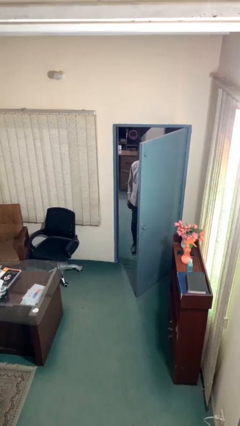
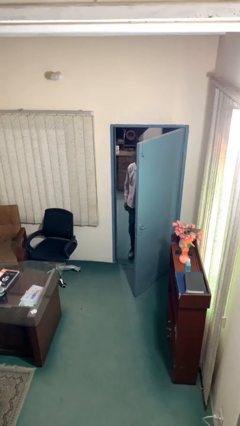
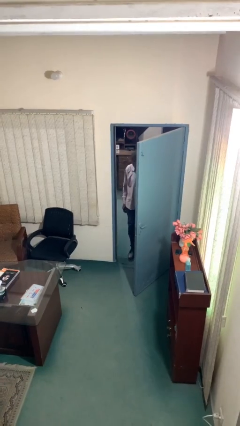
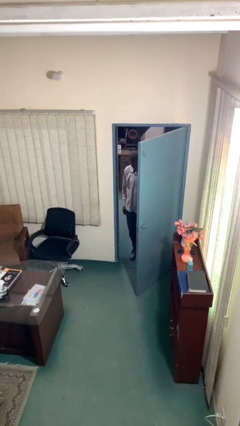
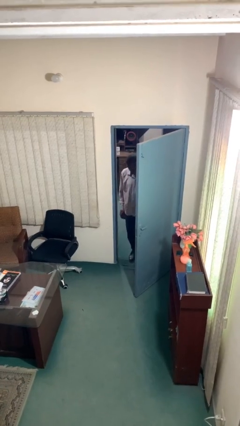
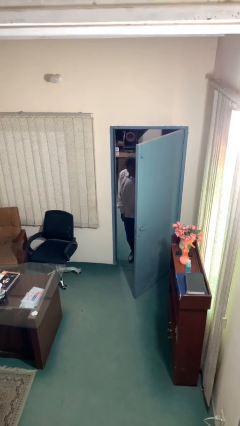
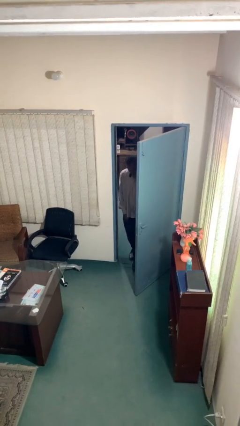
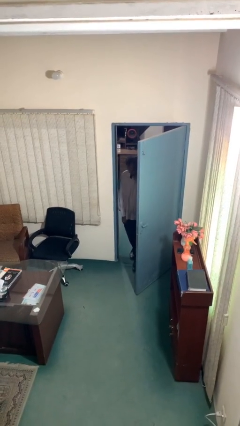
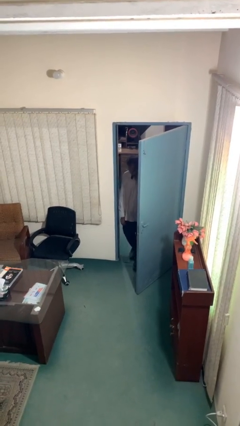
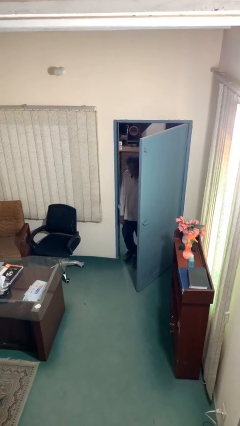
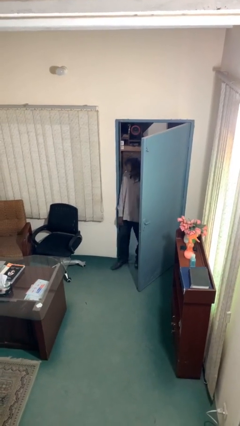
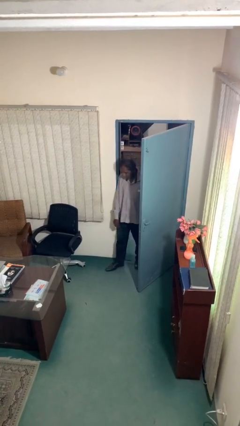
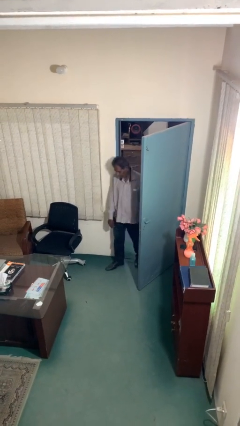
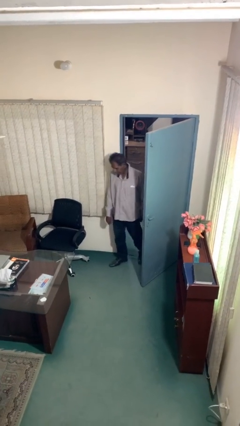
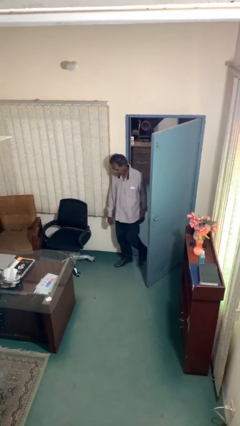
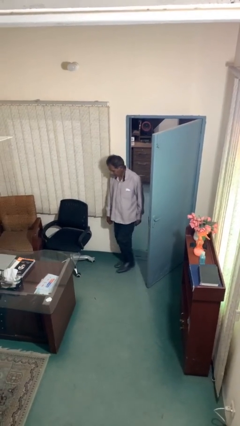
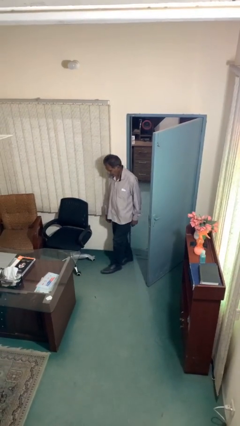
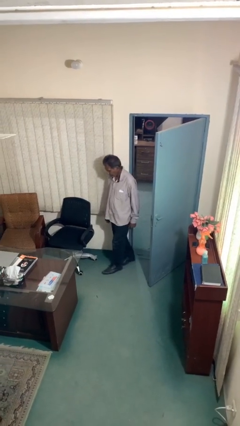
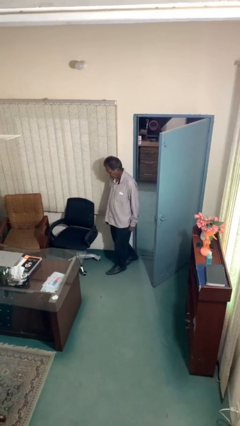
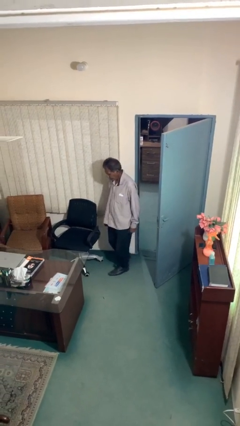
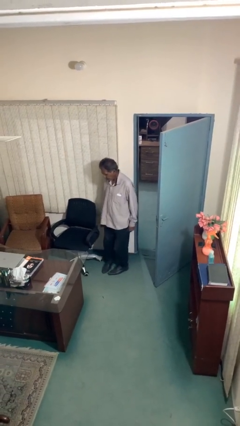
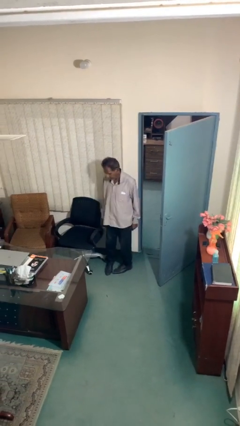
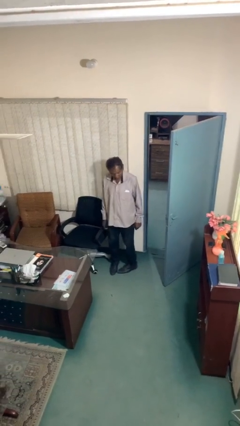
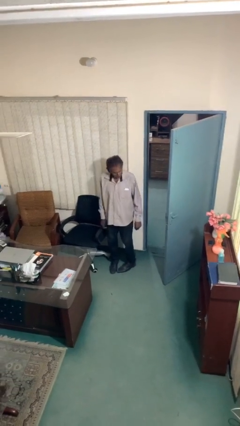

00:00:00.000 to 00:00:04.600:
person enters scene through structure

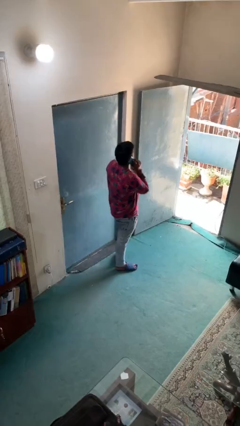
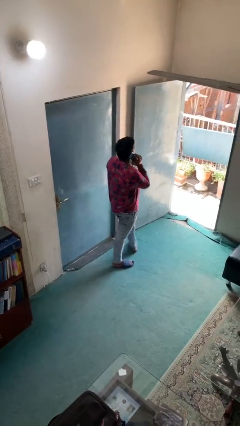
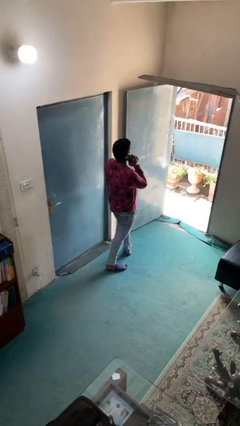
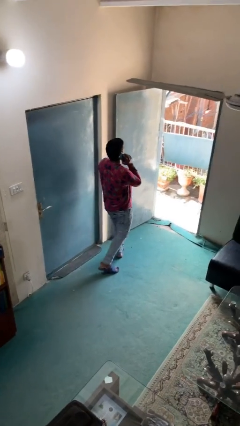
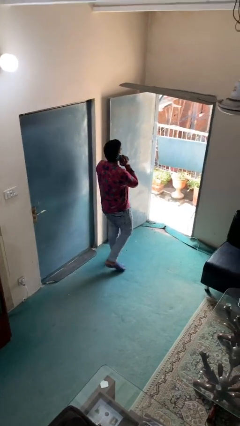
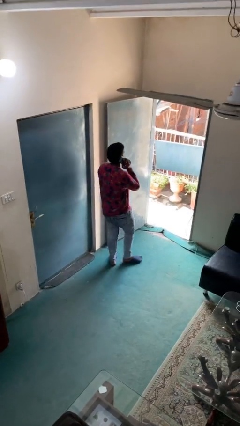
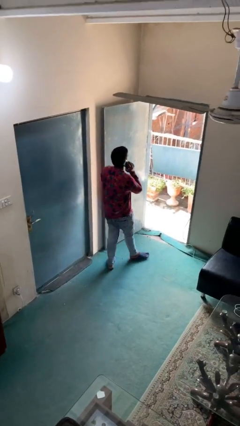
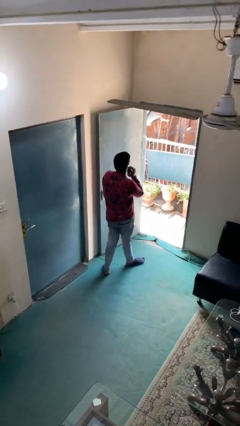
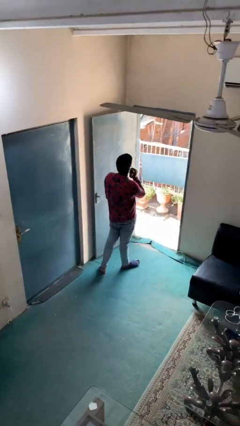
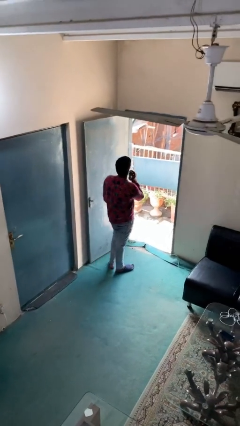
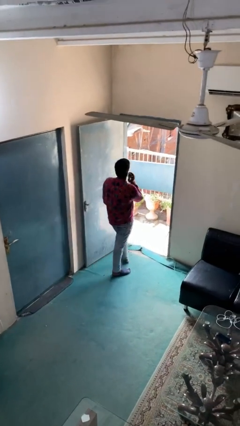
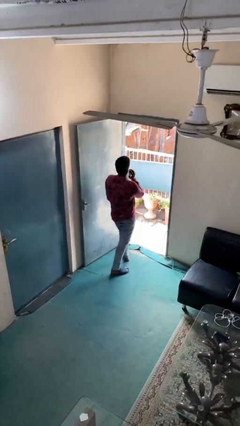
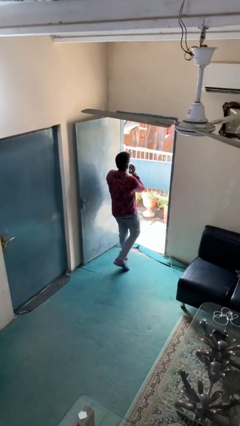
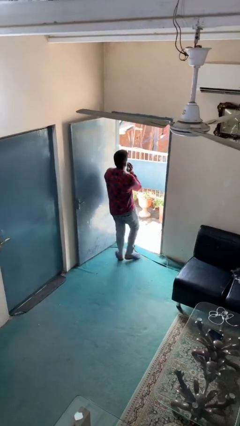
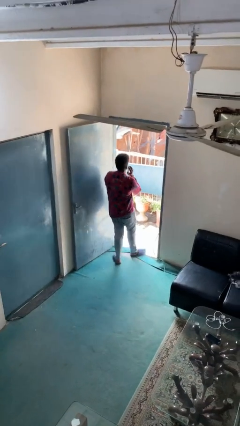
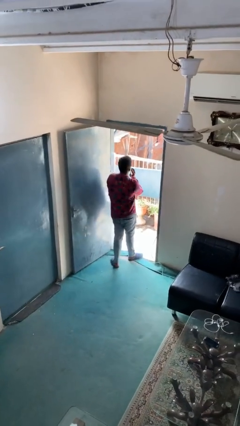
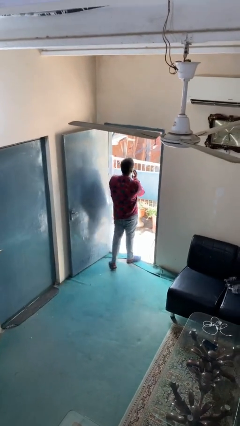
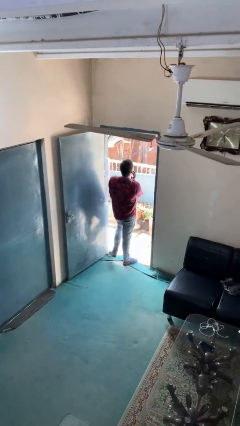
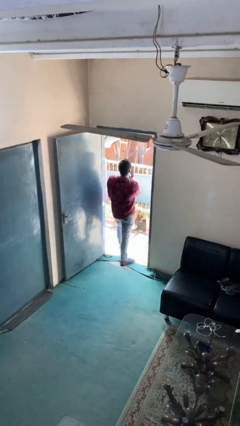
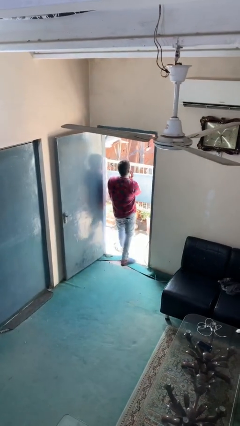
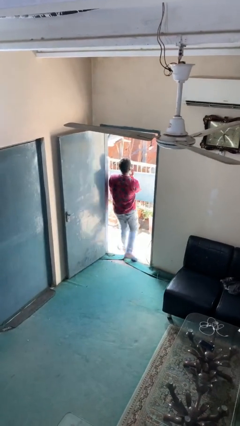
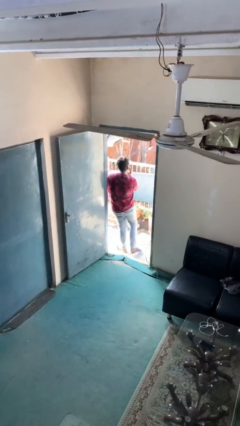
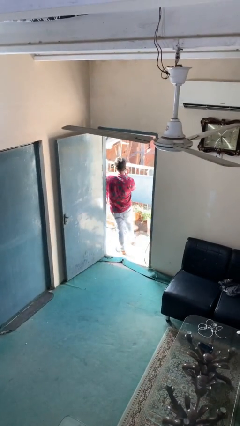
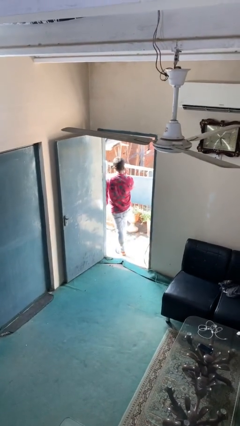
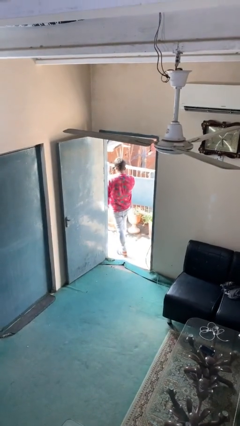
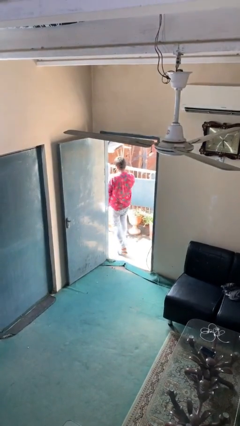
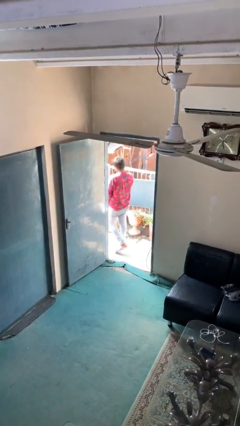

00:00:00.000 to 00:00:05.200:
person exits scene through structure

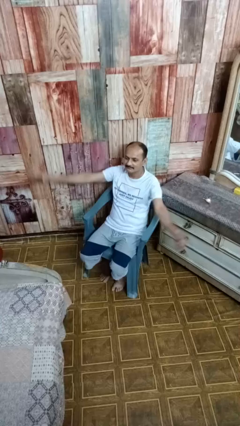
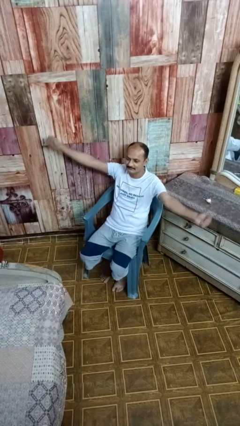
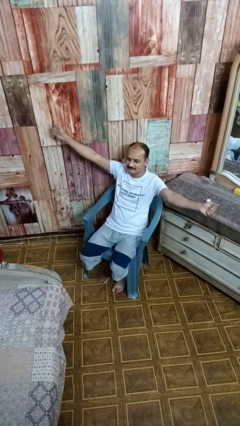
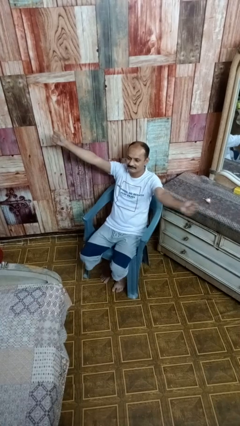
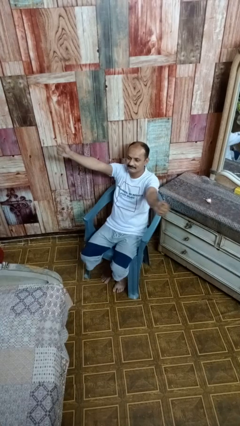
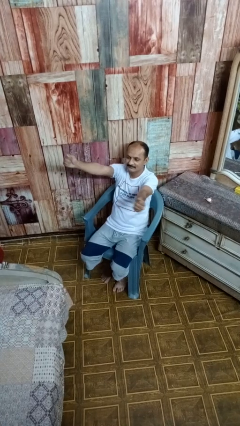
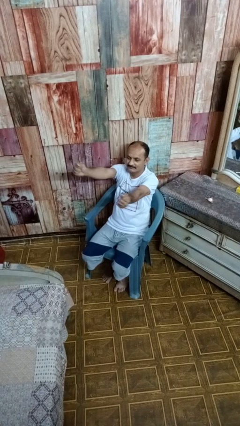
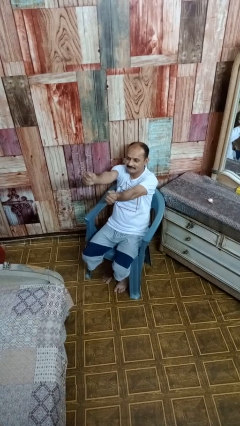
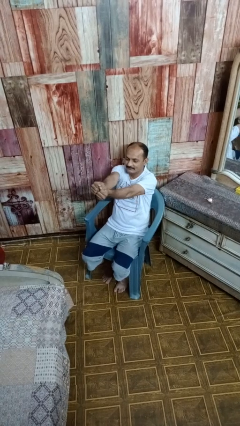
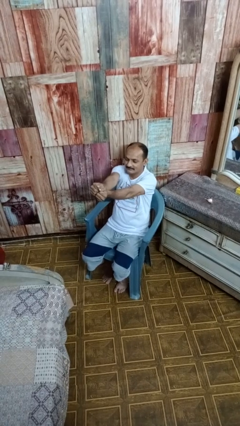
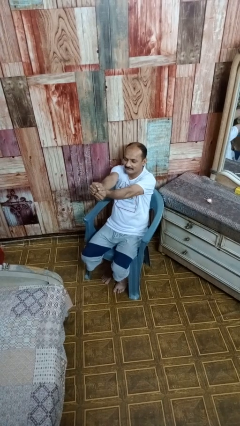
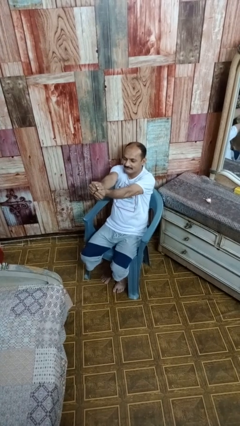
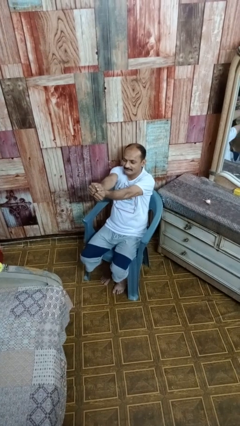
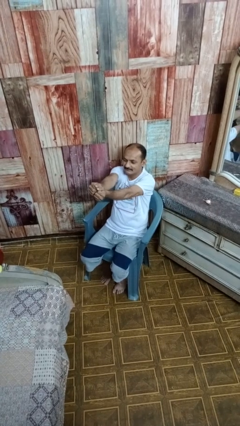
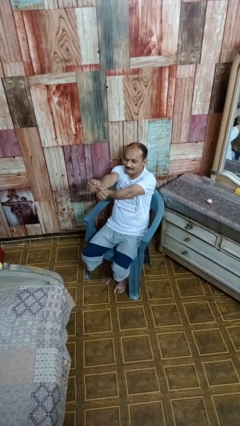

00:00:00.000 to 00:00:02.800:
person gestures zoom in

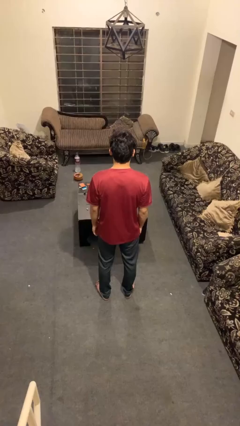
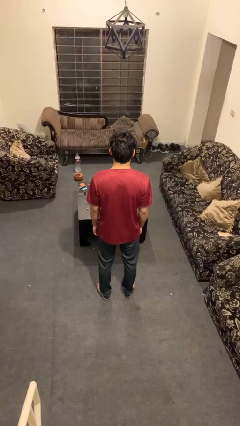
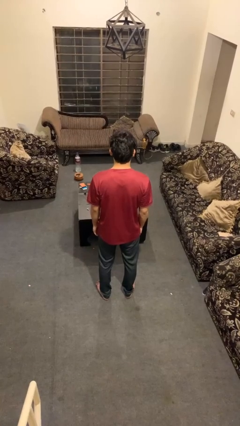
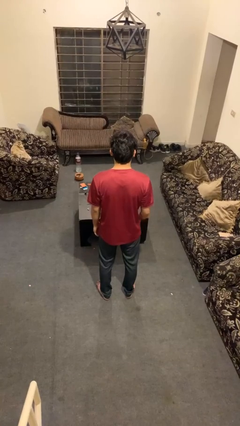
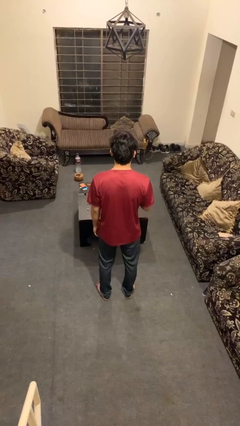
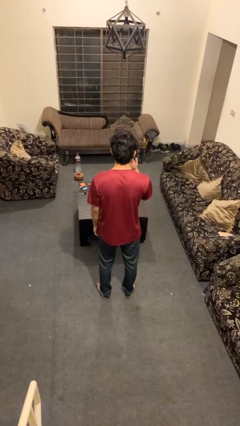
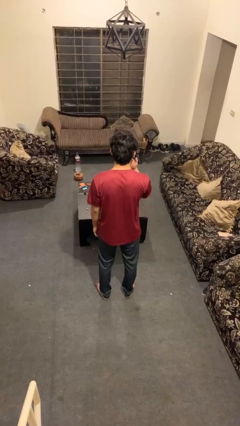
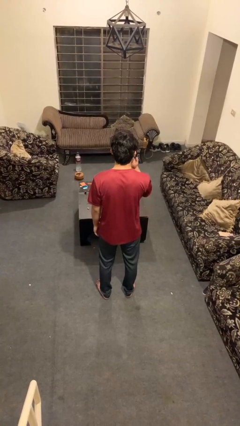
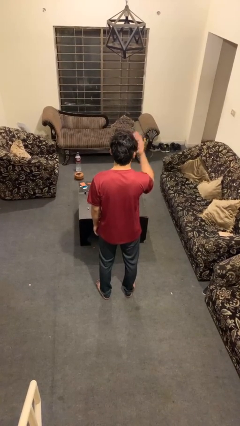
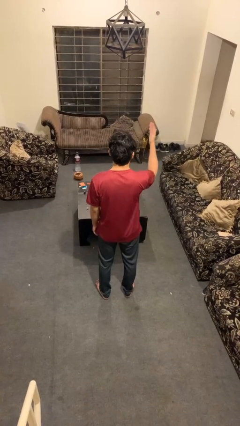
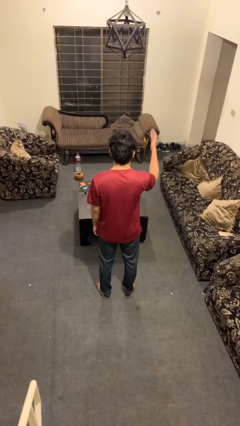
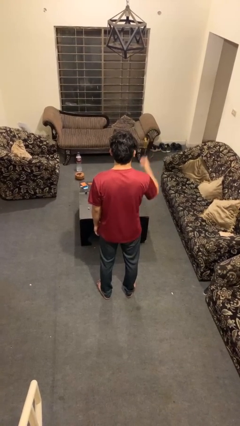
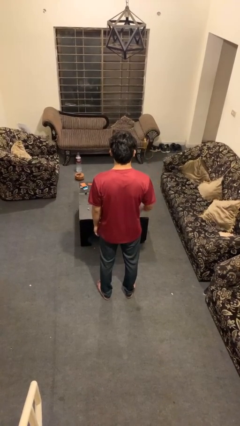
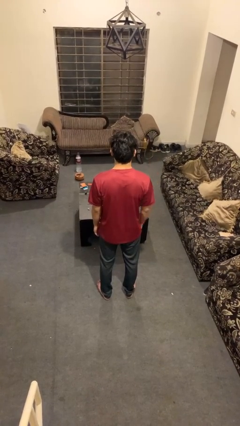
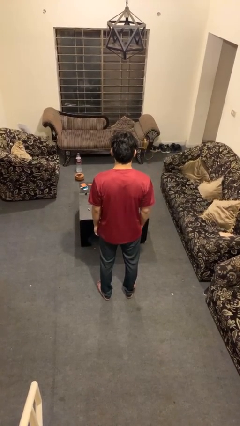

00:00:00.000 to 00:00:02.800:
person gestures blow kiss

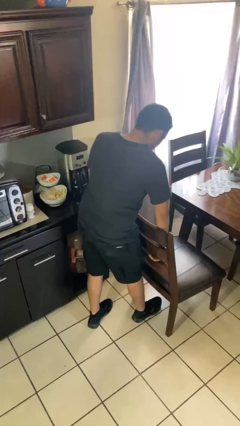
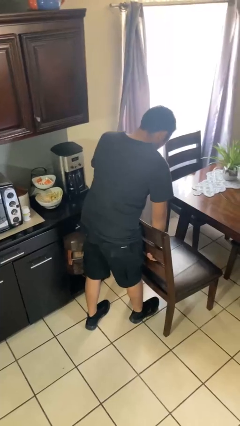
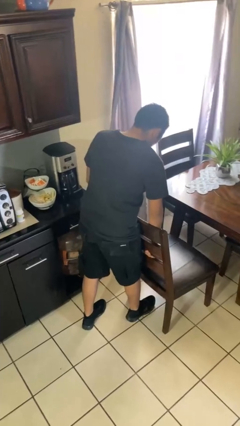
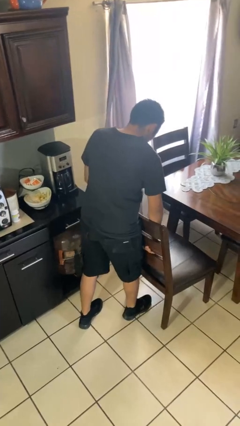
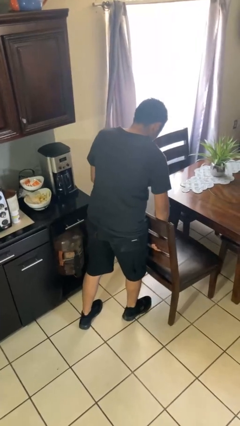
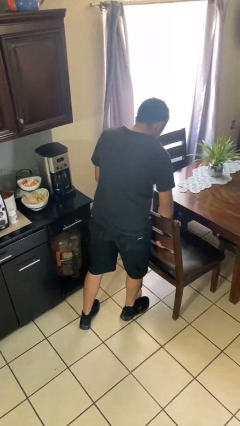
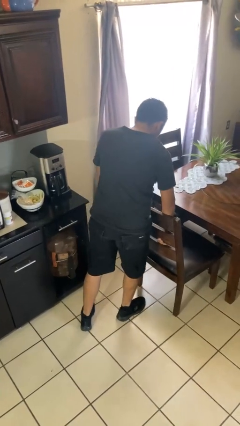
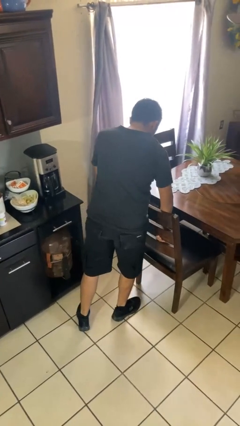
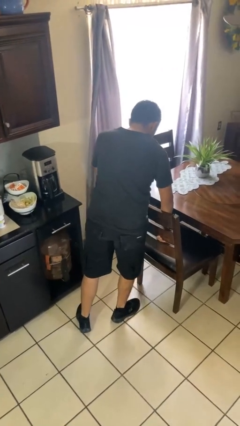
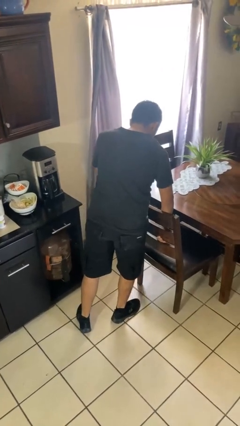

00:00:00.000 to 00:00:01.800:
person pushes in chair

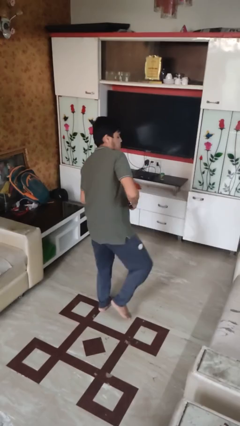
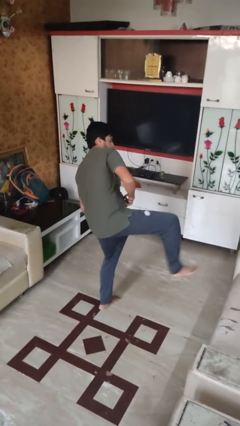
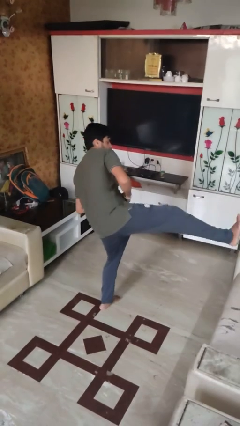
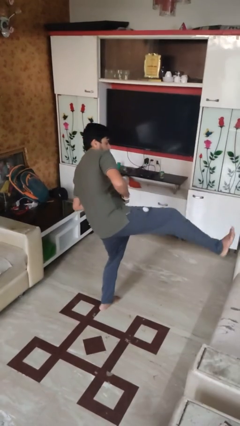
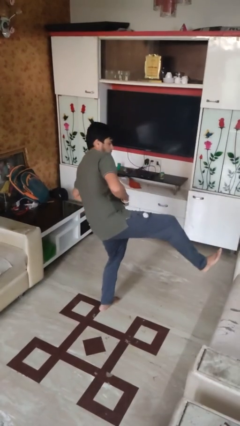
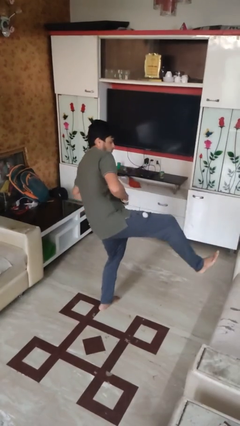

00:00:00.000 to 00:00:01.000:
person karate kicks
